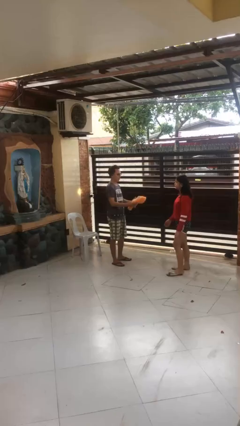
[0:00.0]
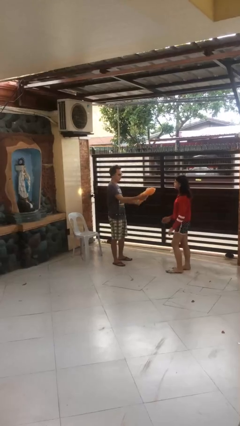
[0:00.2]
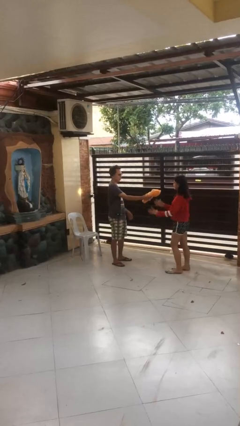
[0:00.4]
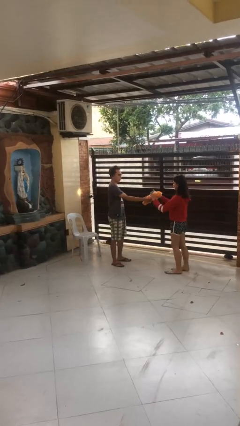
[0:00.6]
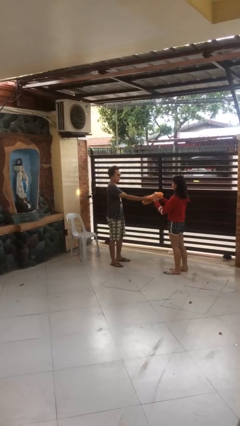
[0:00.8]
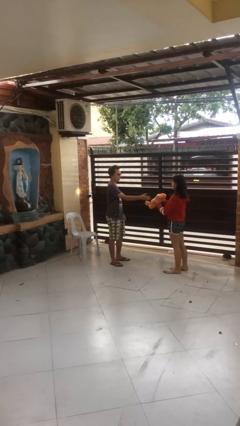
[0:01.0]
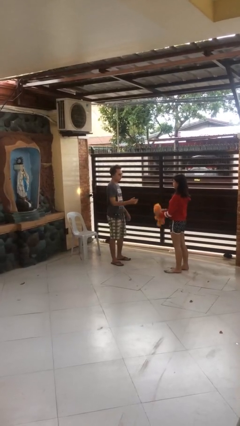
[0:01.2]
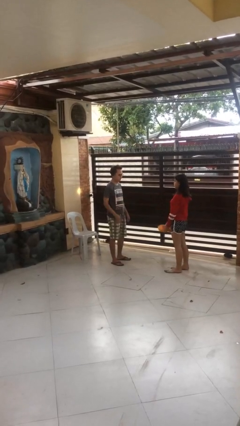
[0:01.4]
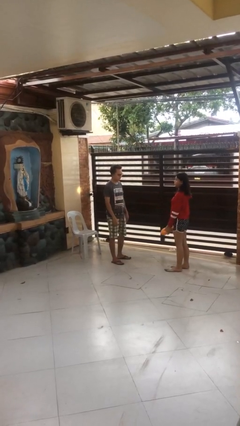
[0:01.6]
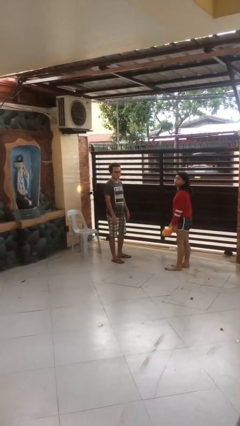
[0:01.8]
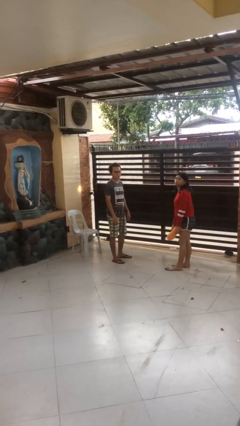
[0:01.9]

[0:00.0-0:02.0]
person transfers object to person

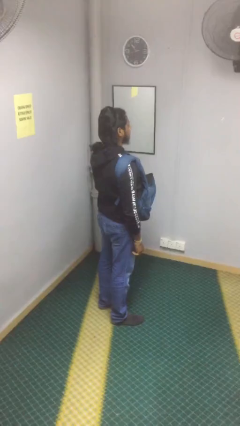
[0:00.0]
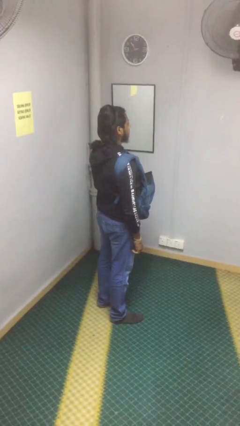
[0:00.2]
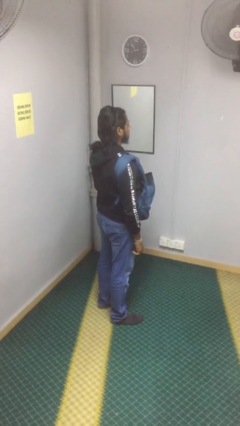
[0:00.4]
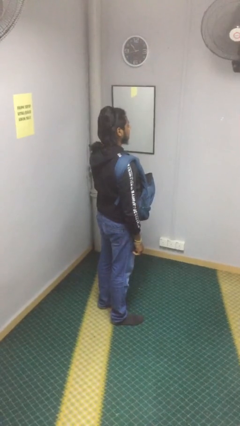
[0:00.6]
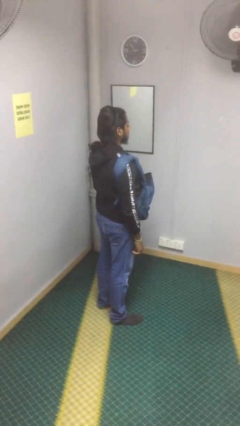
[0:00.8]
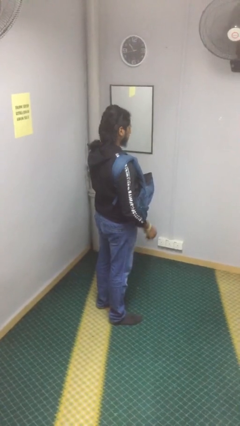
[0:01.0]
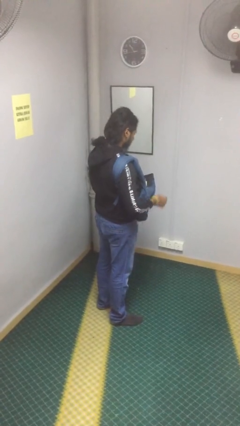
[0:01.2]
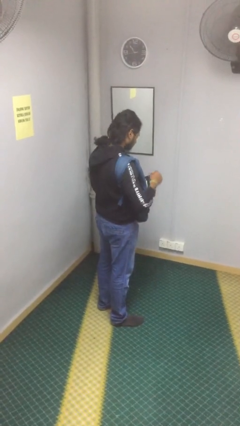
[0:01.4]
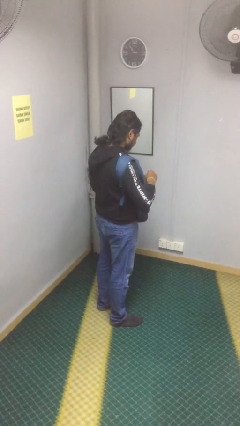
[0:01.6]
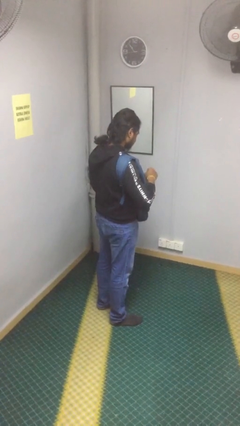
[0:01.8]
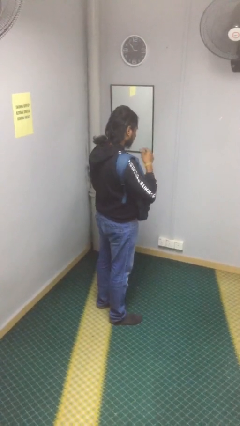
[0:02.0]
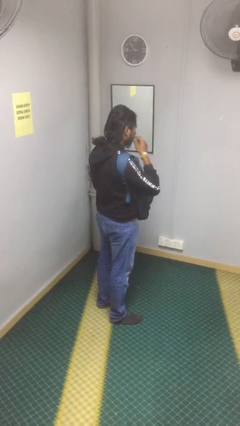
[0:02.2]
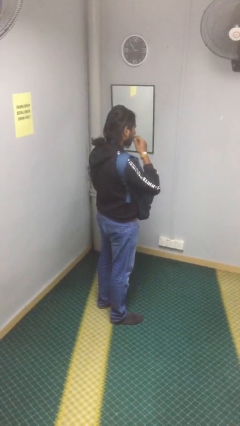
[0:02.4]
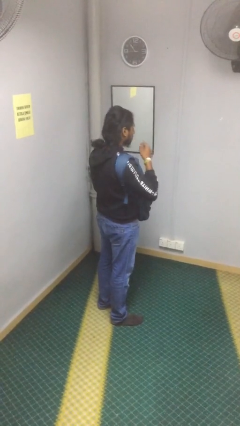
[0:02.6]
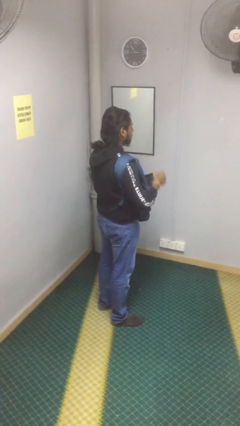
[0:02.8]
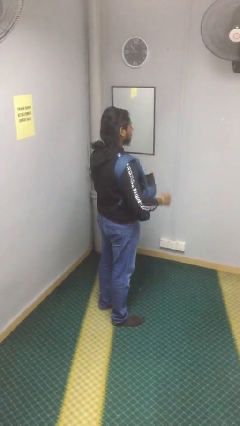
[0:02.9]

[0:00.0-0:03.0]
person eats snack from bag

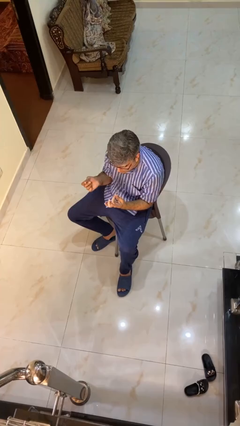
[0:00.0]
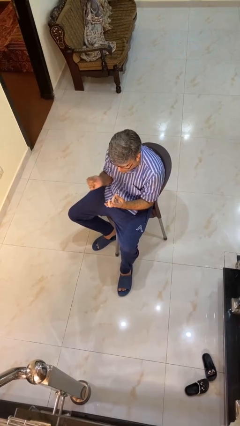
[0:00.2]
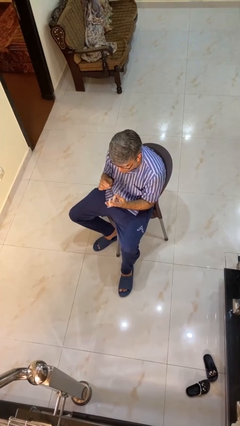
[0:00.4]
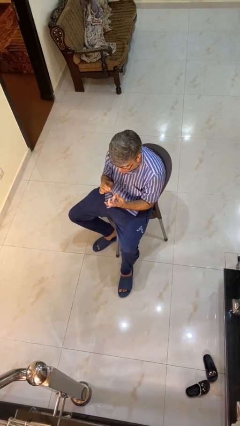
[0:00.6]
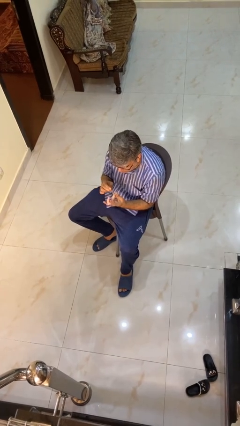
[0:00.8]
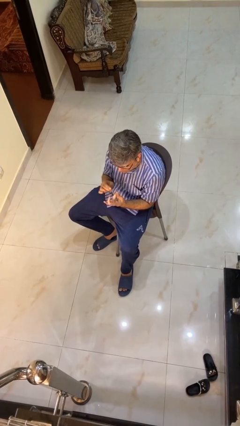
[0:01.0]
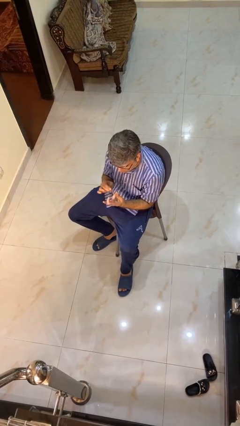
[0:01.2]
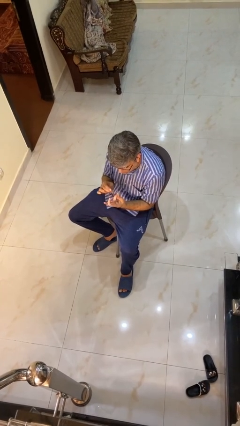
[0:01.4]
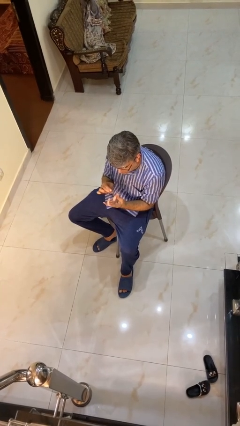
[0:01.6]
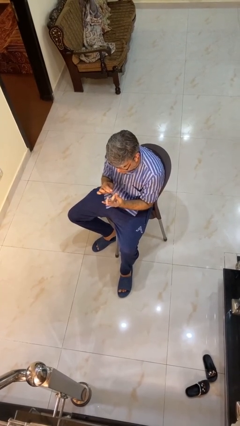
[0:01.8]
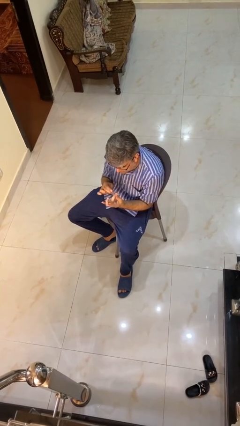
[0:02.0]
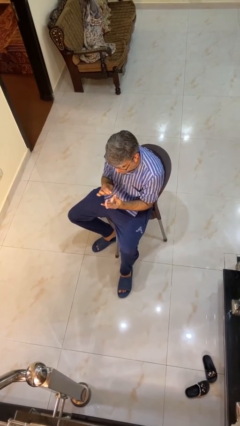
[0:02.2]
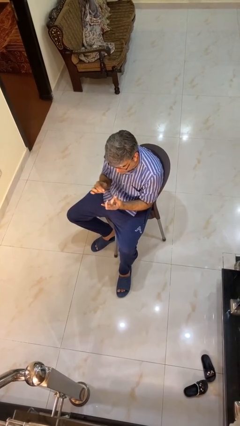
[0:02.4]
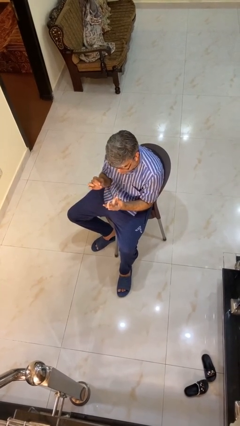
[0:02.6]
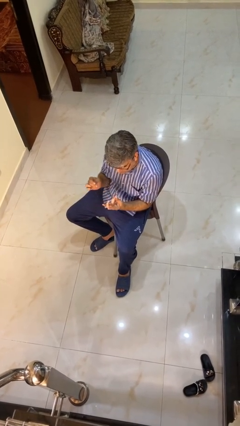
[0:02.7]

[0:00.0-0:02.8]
person files fingernails

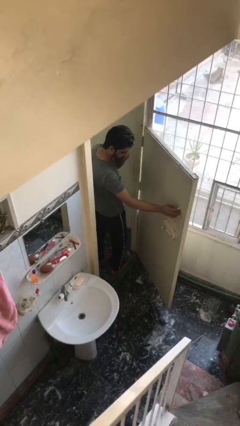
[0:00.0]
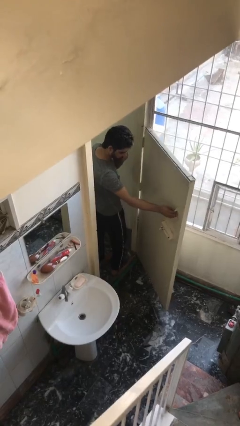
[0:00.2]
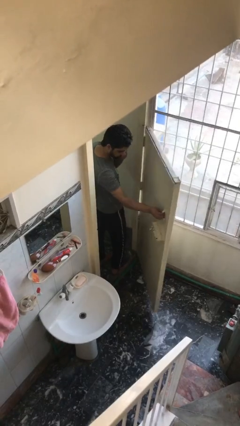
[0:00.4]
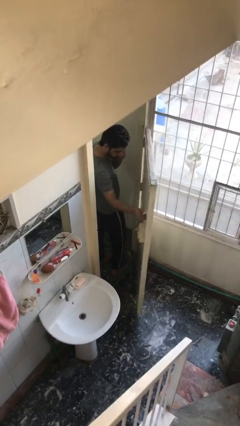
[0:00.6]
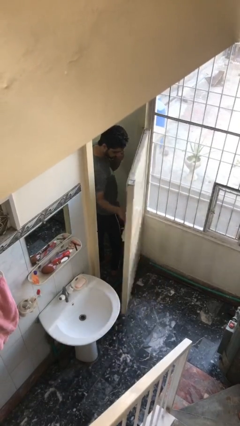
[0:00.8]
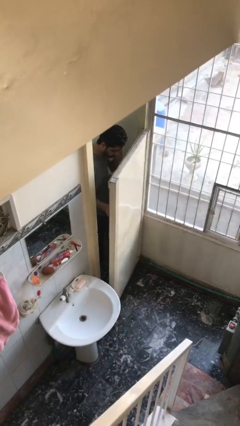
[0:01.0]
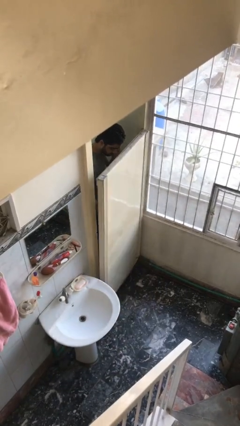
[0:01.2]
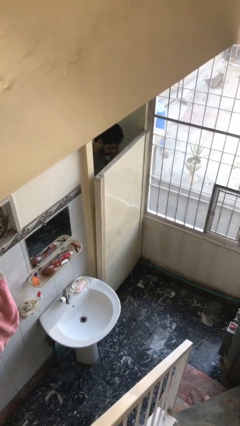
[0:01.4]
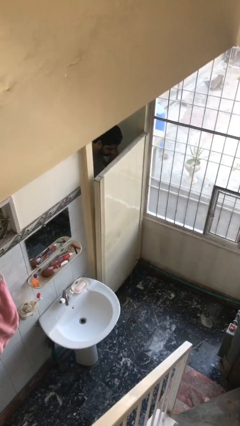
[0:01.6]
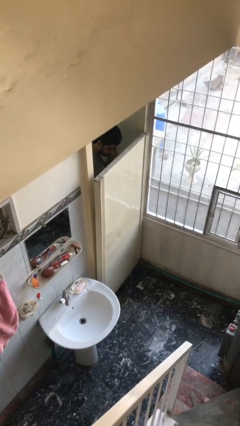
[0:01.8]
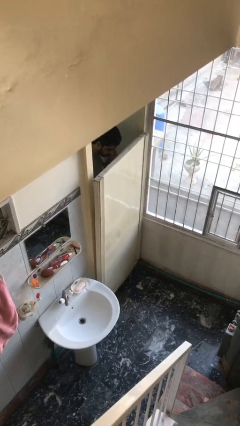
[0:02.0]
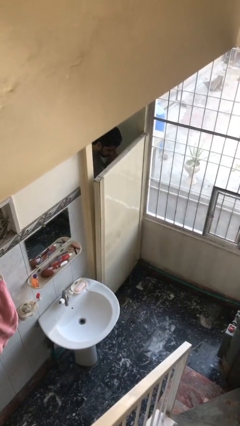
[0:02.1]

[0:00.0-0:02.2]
person closes facility door

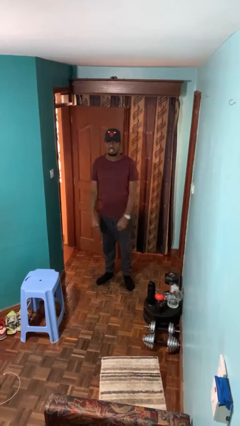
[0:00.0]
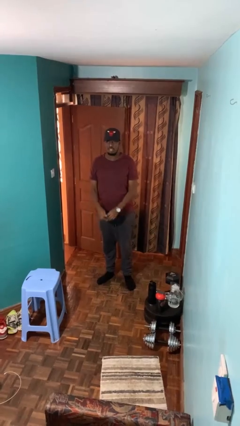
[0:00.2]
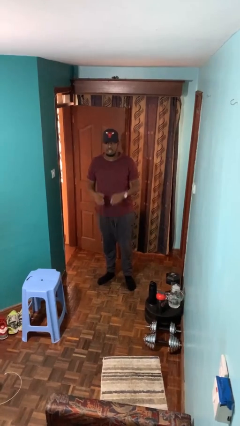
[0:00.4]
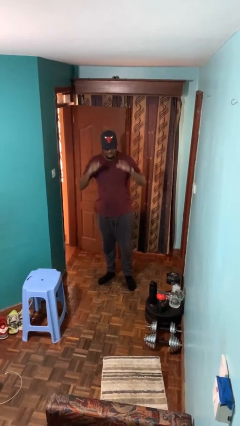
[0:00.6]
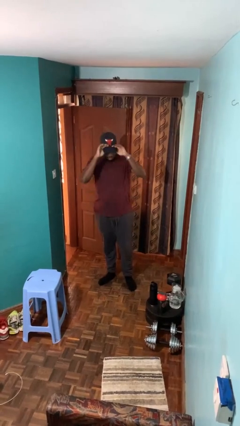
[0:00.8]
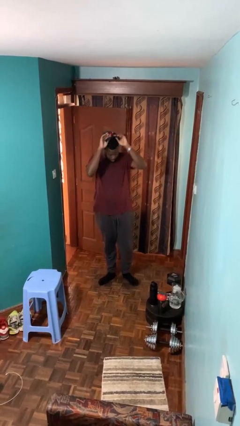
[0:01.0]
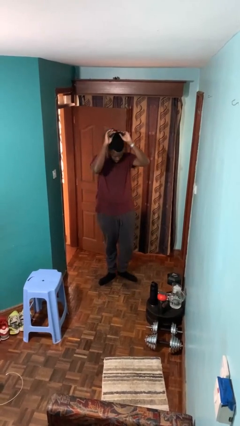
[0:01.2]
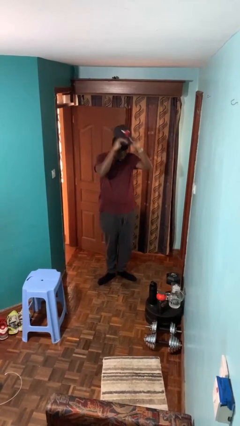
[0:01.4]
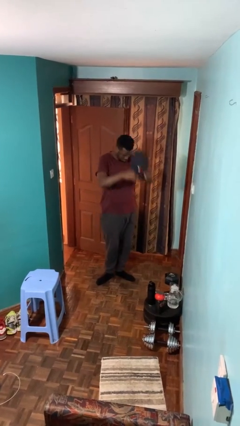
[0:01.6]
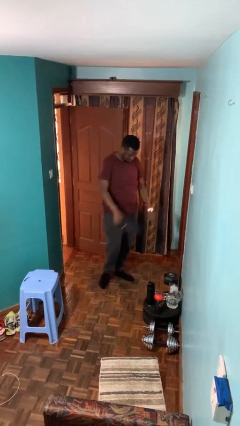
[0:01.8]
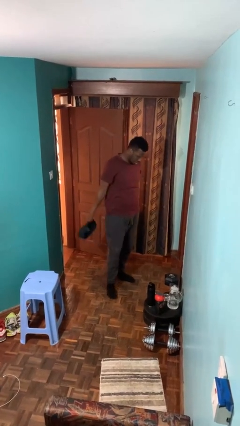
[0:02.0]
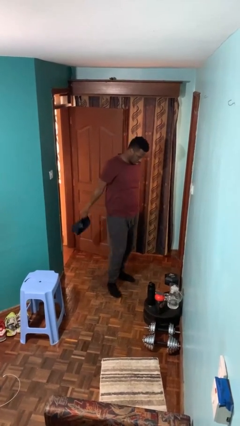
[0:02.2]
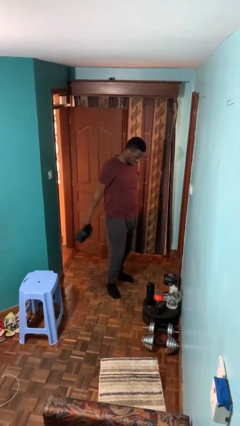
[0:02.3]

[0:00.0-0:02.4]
person takes off hat

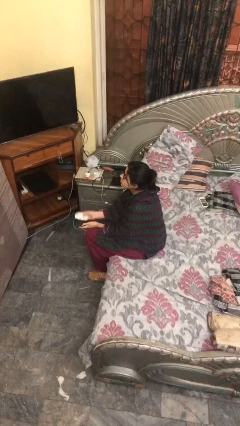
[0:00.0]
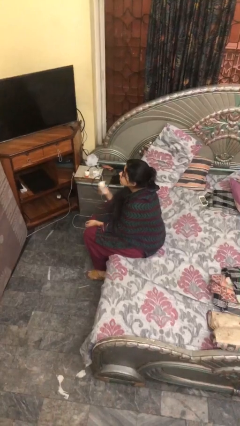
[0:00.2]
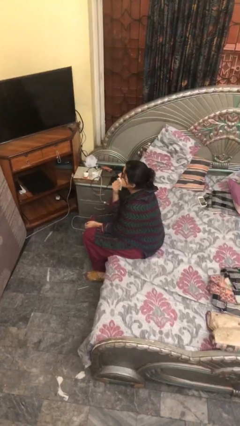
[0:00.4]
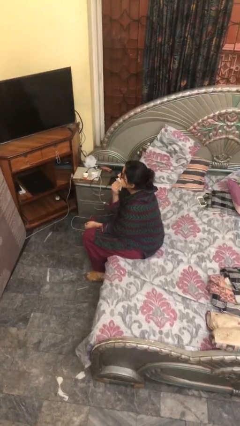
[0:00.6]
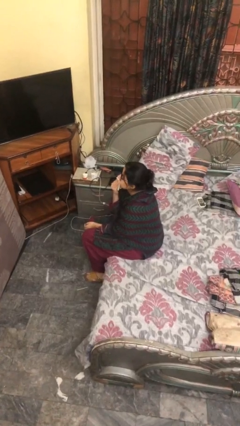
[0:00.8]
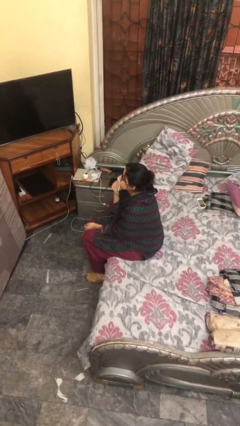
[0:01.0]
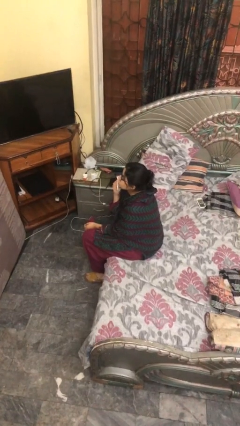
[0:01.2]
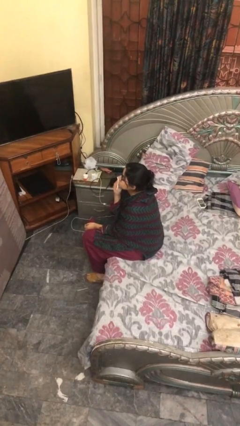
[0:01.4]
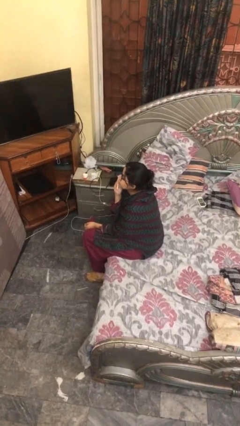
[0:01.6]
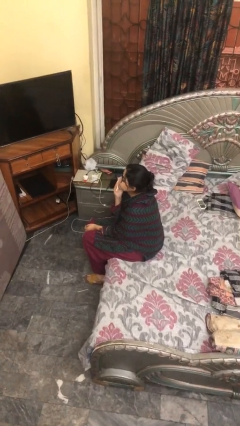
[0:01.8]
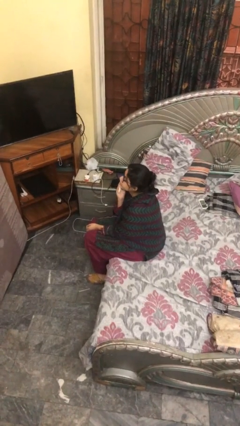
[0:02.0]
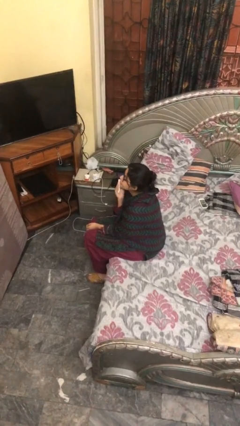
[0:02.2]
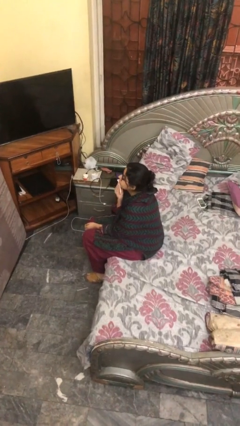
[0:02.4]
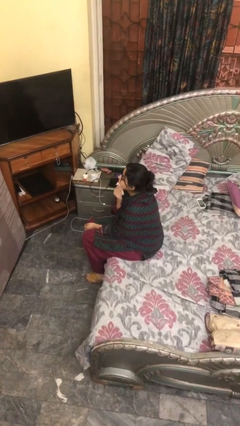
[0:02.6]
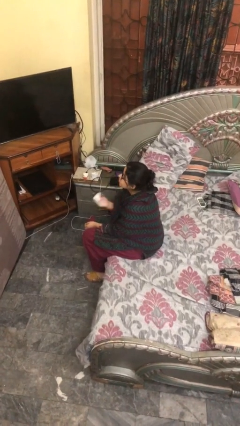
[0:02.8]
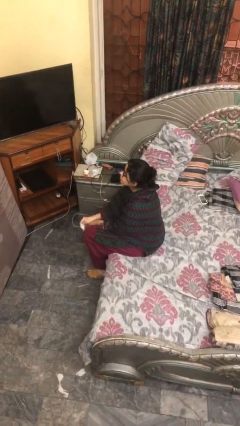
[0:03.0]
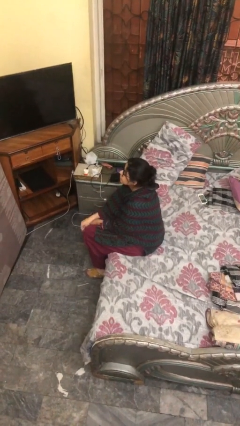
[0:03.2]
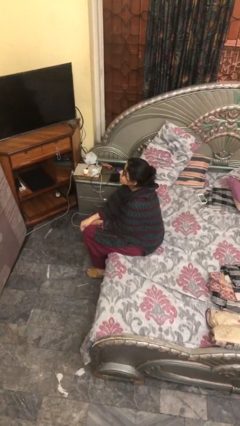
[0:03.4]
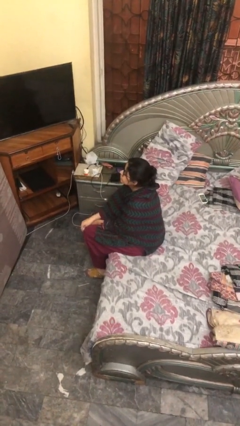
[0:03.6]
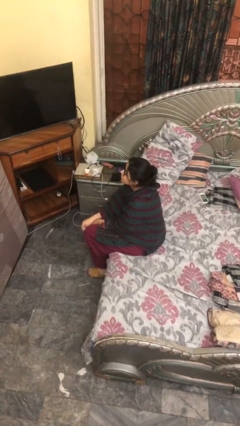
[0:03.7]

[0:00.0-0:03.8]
person wipes mouth with napkin

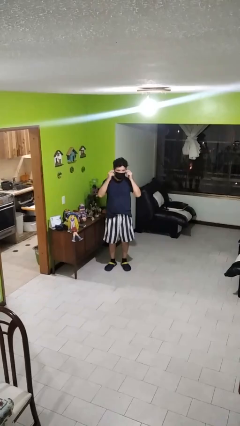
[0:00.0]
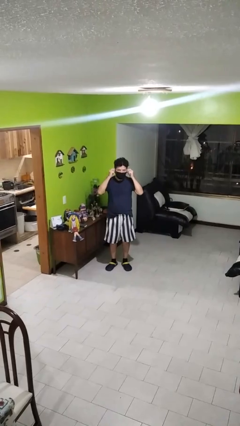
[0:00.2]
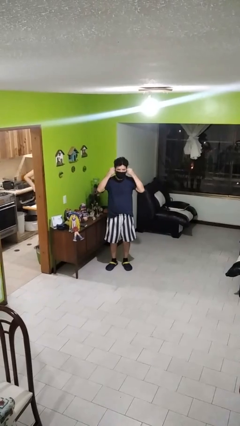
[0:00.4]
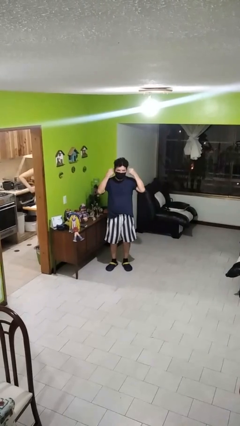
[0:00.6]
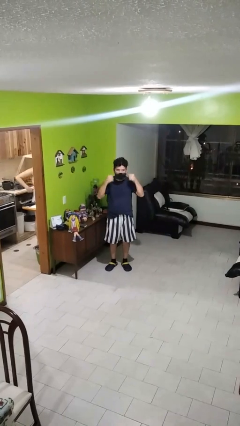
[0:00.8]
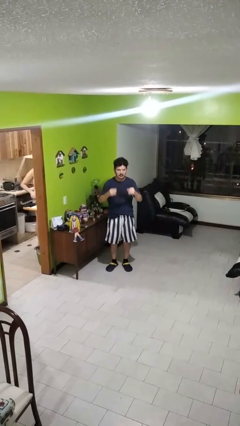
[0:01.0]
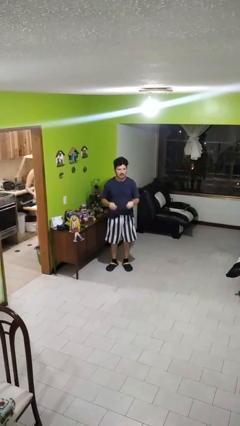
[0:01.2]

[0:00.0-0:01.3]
person takes off facemask
